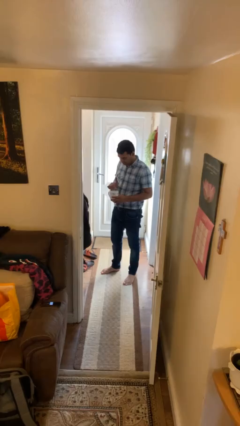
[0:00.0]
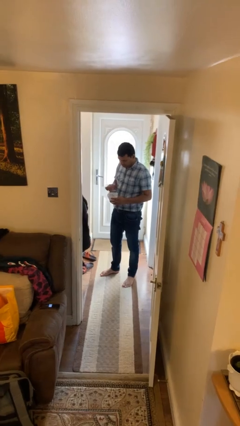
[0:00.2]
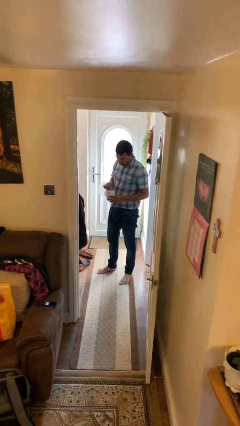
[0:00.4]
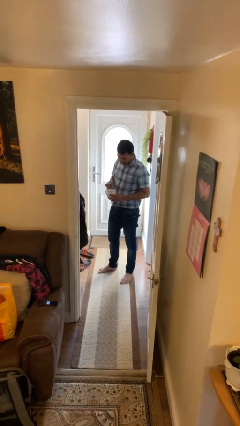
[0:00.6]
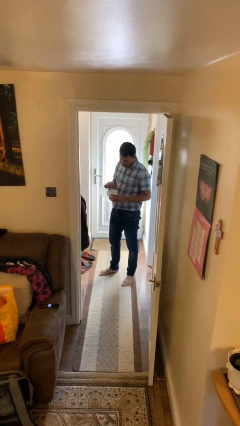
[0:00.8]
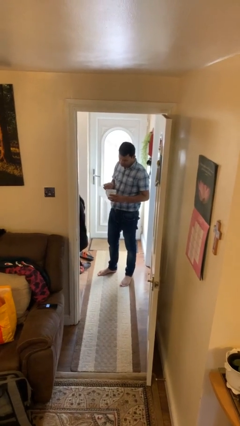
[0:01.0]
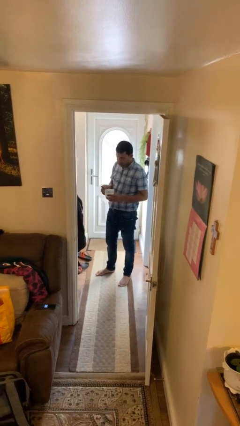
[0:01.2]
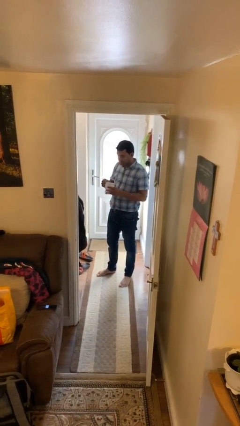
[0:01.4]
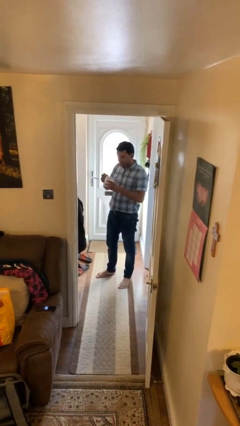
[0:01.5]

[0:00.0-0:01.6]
person stirs mug

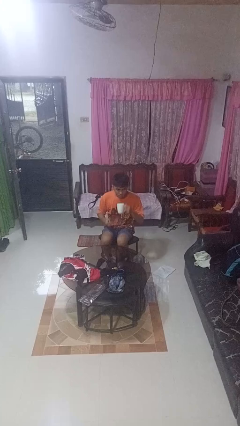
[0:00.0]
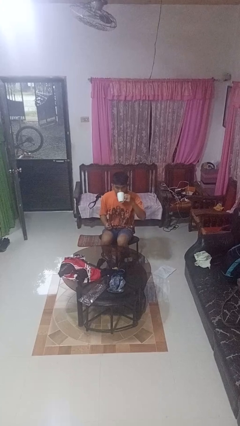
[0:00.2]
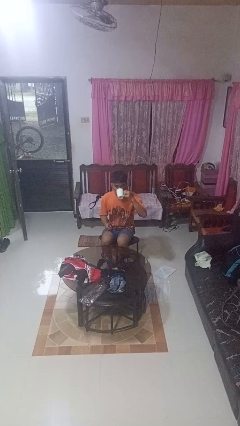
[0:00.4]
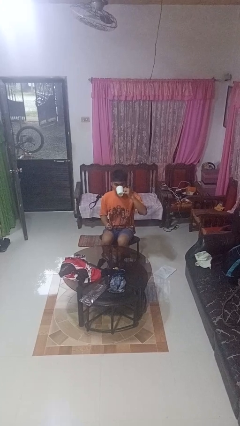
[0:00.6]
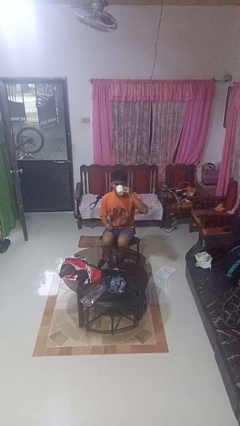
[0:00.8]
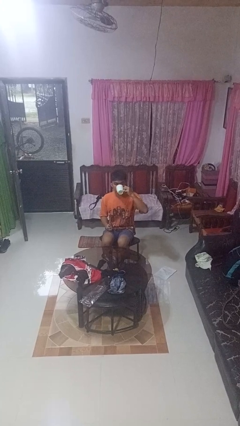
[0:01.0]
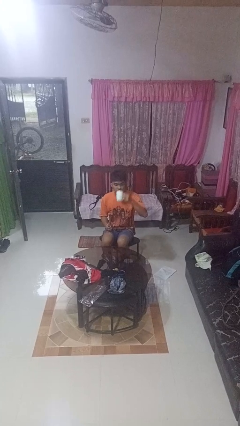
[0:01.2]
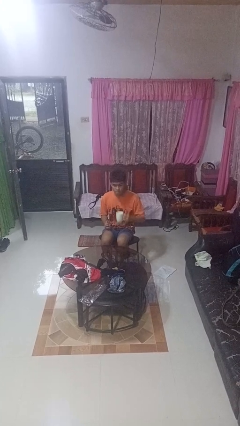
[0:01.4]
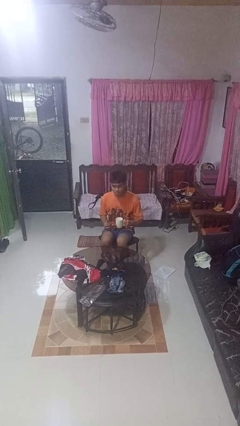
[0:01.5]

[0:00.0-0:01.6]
person drinks from mug

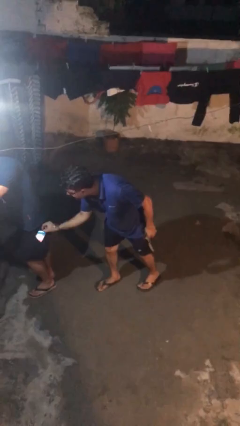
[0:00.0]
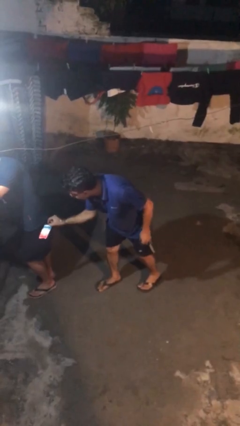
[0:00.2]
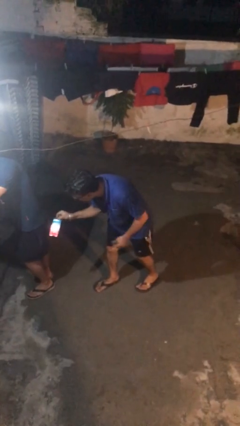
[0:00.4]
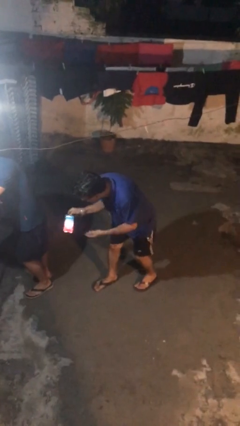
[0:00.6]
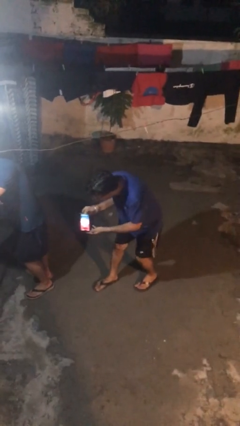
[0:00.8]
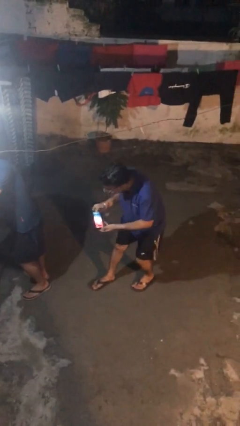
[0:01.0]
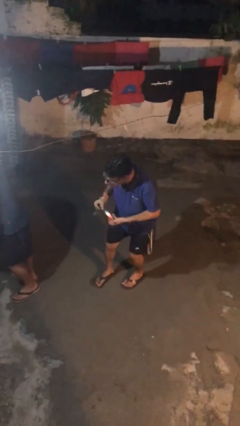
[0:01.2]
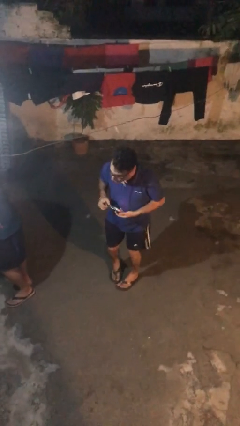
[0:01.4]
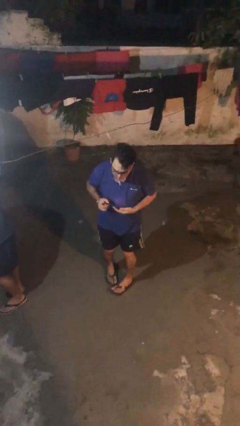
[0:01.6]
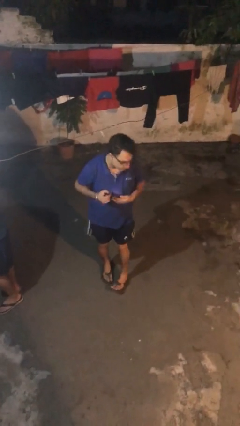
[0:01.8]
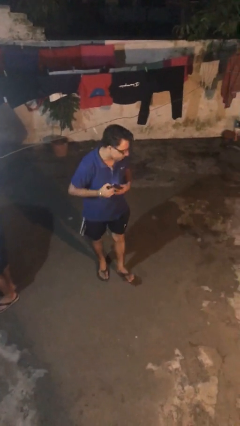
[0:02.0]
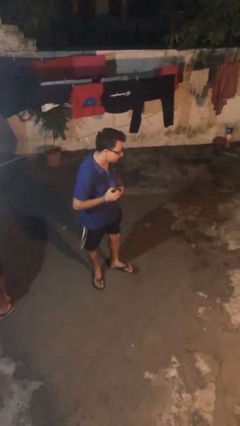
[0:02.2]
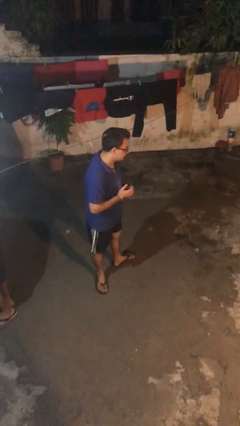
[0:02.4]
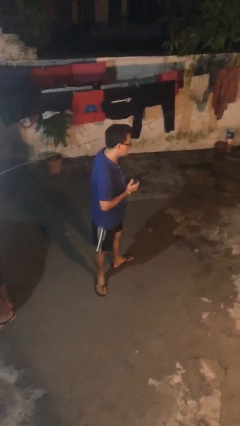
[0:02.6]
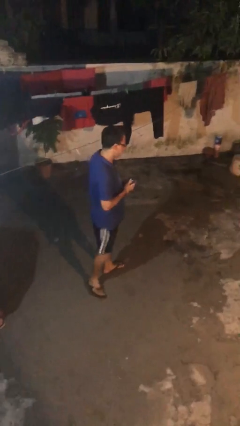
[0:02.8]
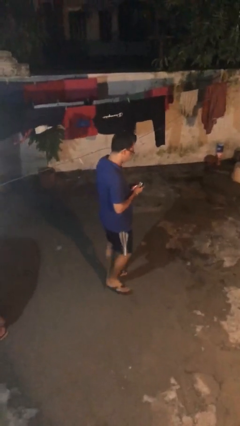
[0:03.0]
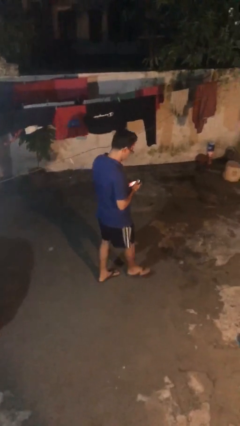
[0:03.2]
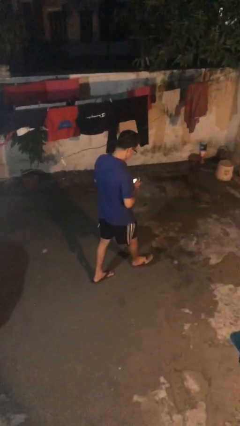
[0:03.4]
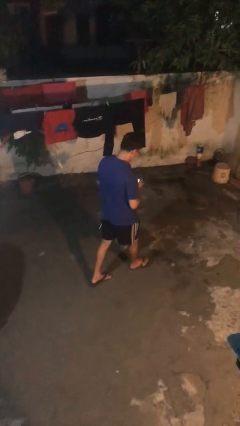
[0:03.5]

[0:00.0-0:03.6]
person steals object from person

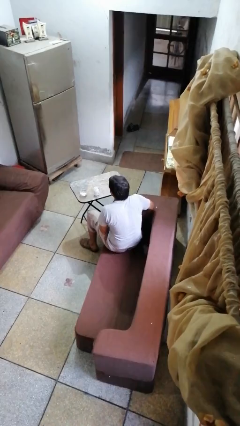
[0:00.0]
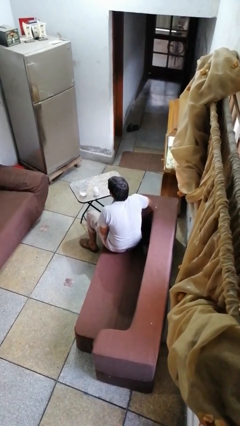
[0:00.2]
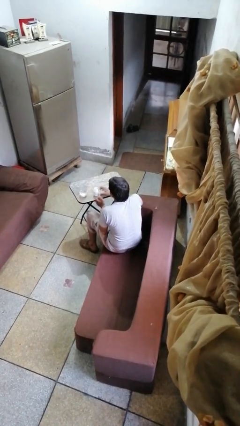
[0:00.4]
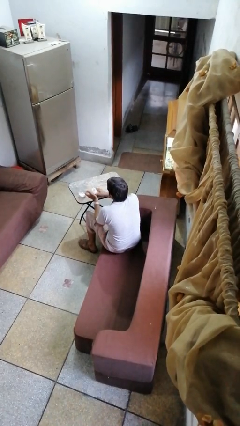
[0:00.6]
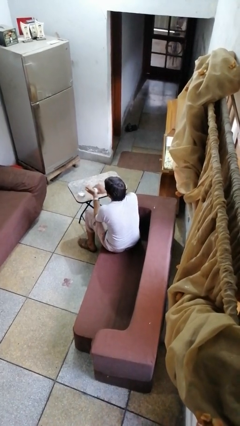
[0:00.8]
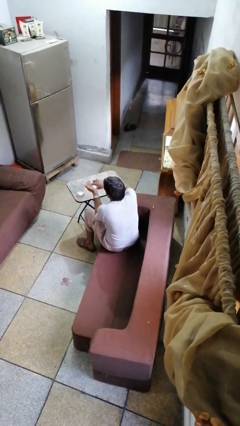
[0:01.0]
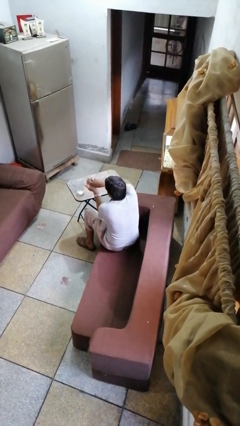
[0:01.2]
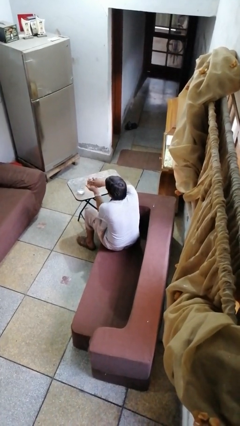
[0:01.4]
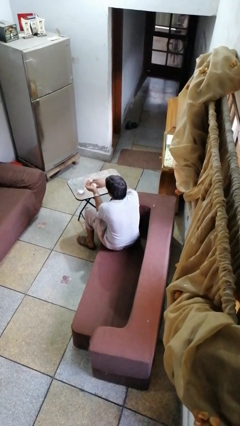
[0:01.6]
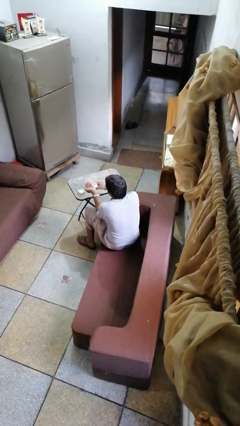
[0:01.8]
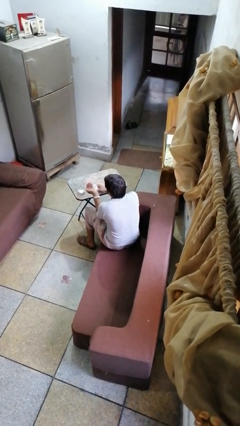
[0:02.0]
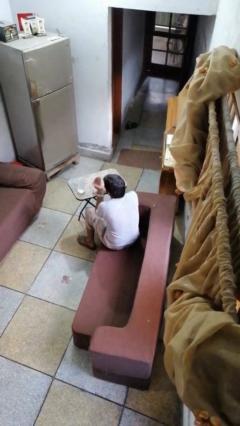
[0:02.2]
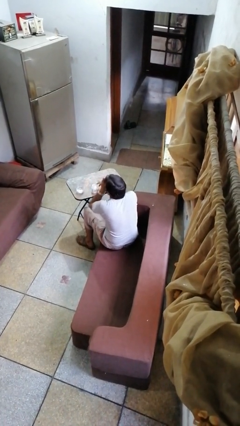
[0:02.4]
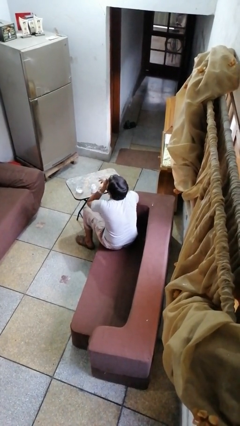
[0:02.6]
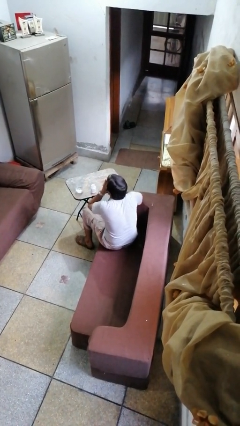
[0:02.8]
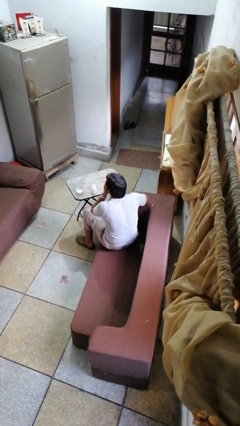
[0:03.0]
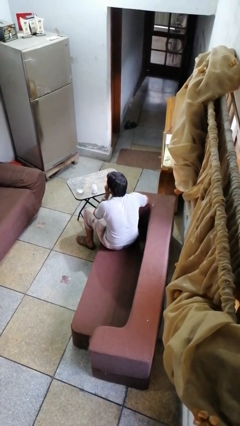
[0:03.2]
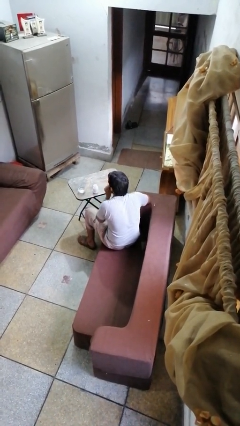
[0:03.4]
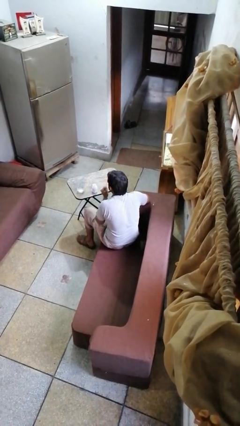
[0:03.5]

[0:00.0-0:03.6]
person takes medicine pills

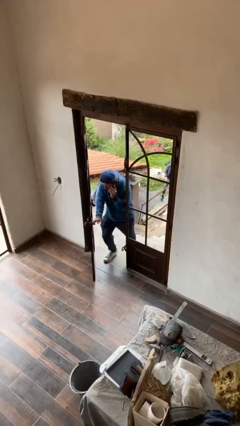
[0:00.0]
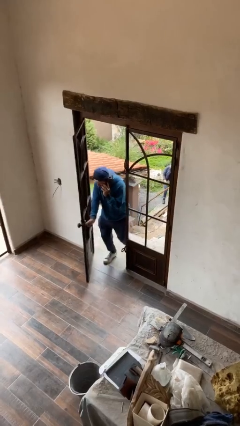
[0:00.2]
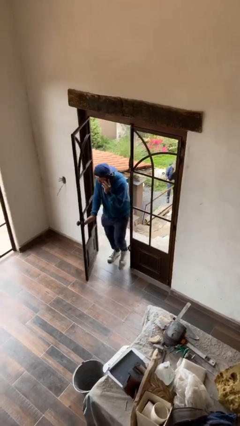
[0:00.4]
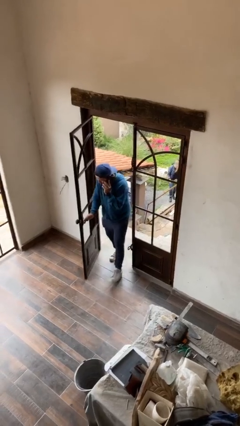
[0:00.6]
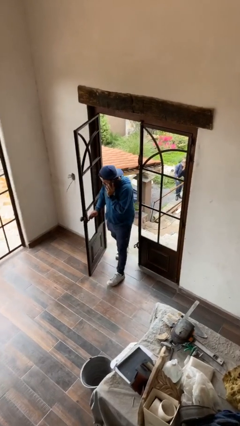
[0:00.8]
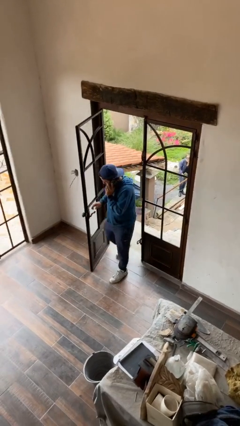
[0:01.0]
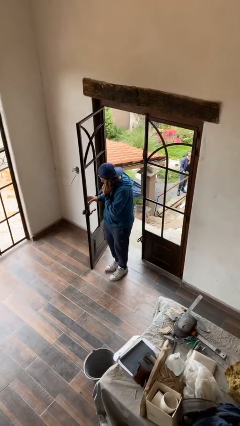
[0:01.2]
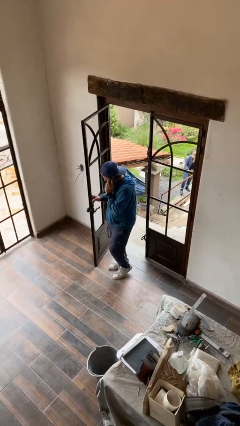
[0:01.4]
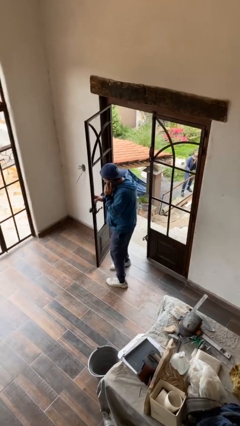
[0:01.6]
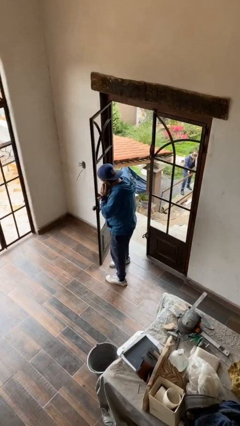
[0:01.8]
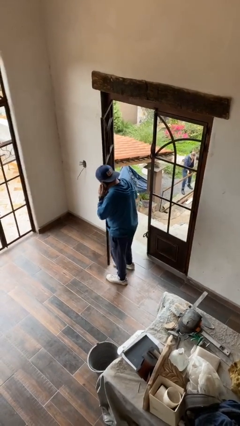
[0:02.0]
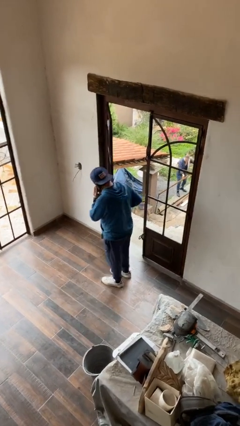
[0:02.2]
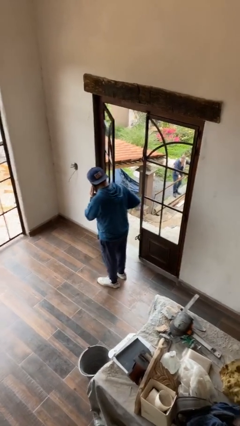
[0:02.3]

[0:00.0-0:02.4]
person enters scene through structure

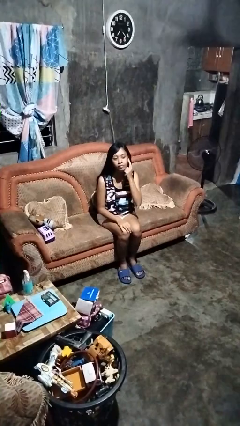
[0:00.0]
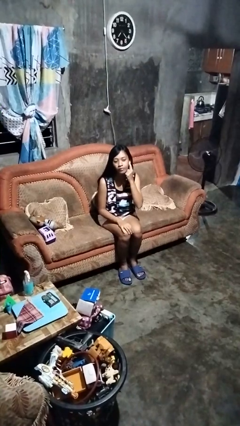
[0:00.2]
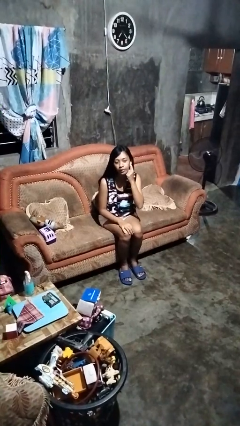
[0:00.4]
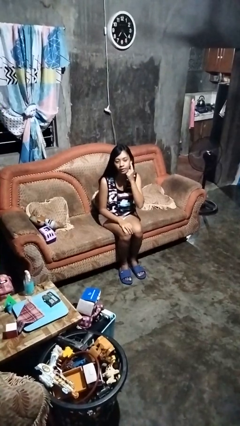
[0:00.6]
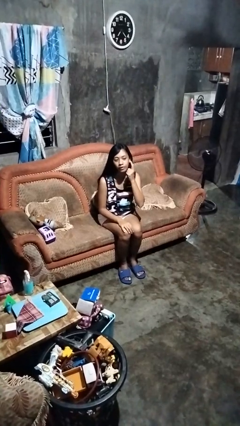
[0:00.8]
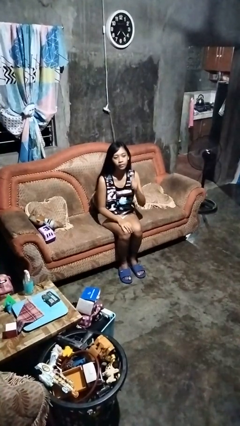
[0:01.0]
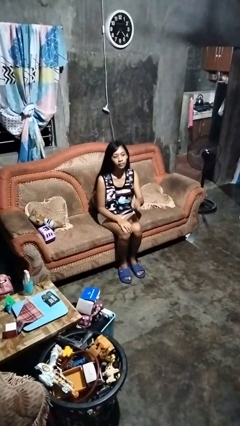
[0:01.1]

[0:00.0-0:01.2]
person gestures listen closely

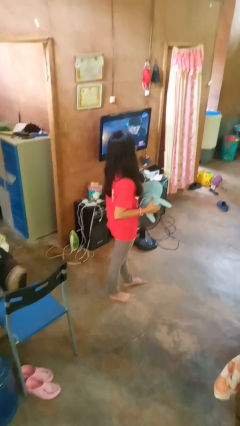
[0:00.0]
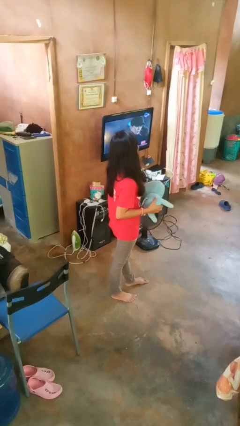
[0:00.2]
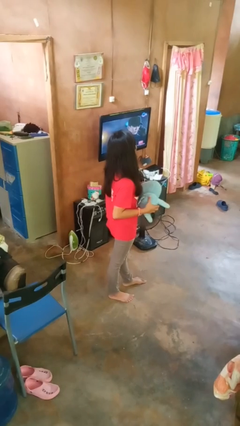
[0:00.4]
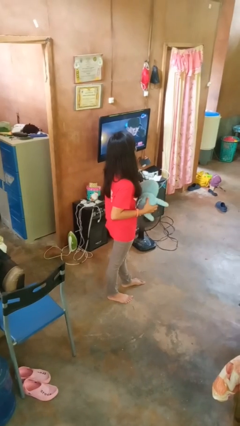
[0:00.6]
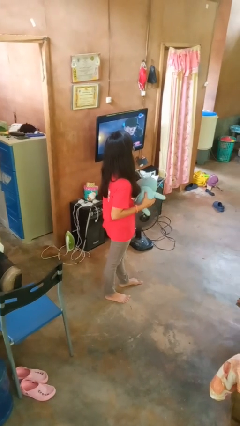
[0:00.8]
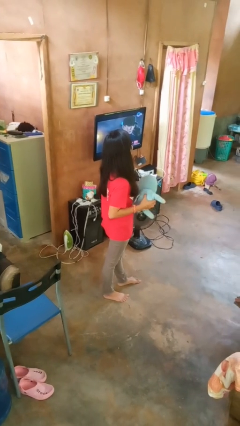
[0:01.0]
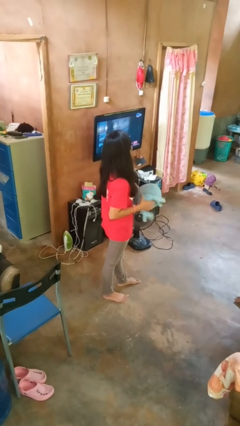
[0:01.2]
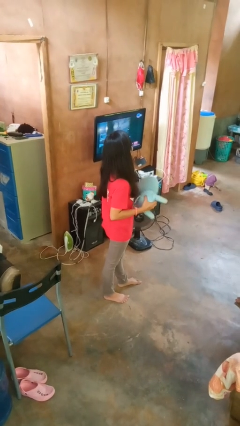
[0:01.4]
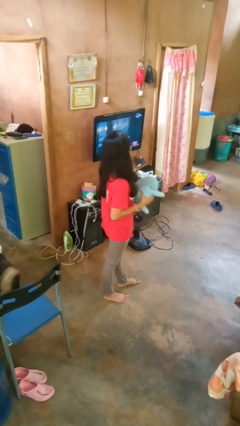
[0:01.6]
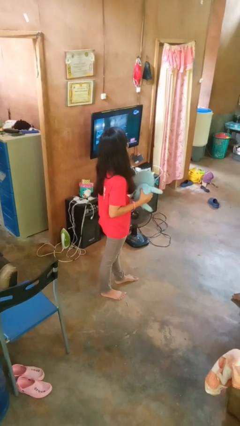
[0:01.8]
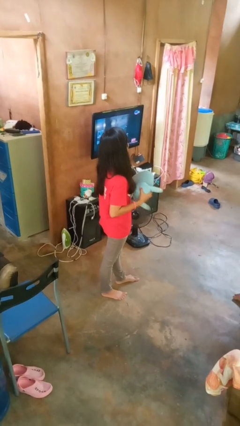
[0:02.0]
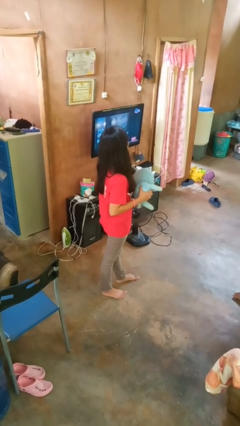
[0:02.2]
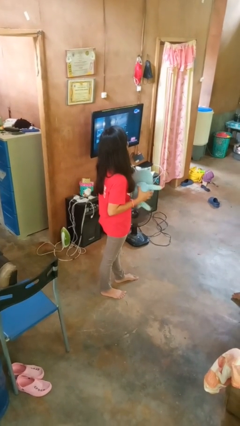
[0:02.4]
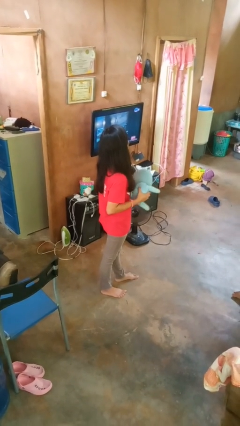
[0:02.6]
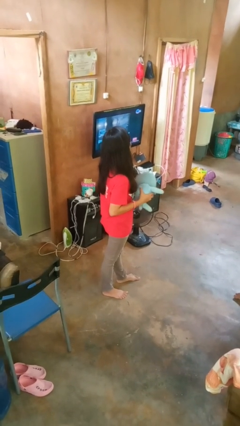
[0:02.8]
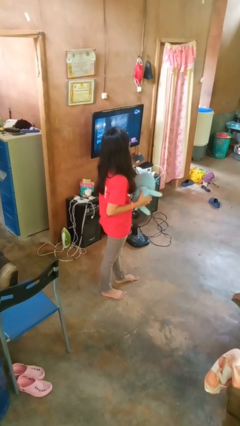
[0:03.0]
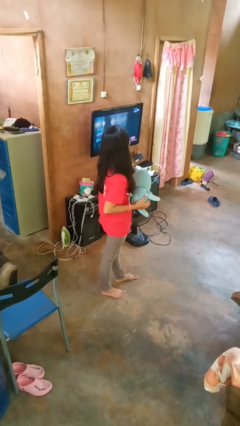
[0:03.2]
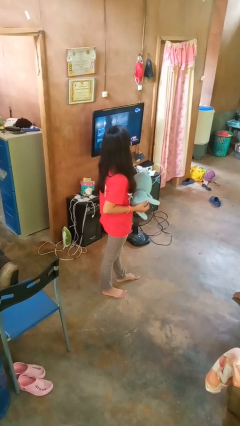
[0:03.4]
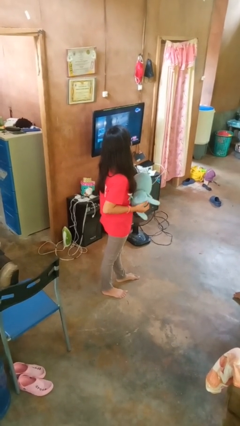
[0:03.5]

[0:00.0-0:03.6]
person squeezes object
